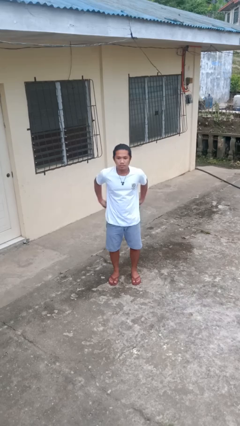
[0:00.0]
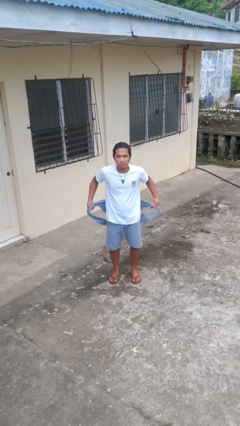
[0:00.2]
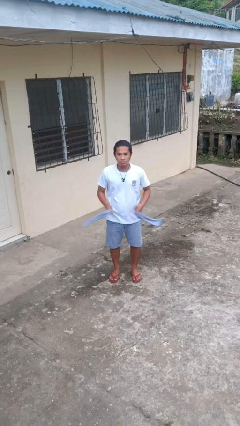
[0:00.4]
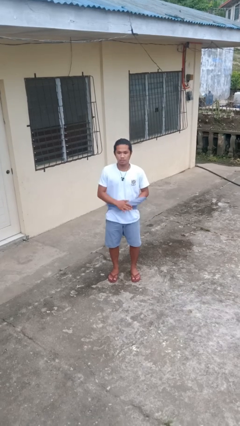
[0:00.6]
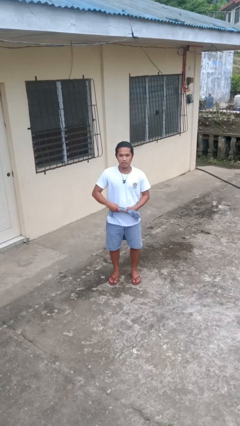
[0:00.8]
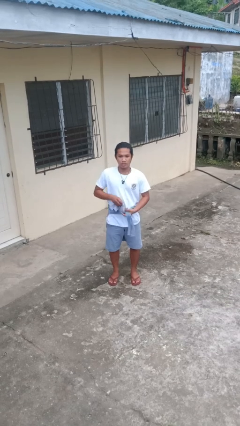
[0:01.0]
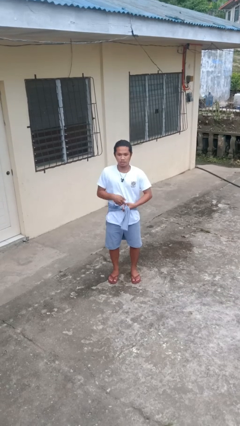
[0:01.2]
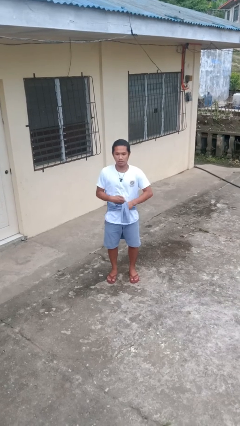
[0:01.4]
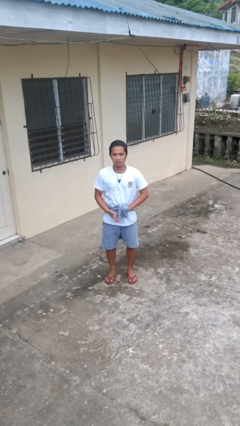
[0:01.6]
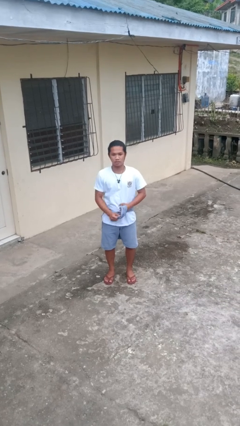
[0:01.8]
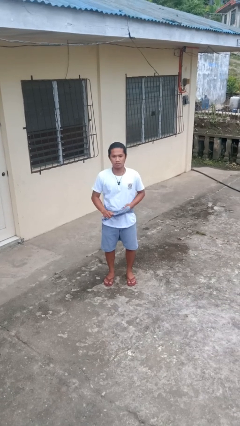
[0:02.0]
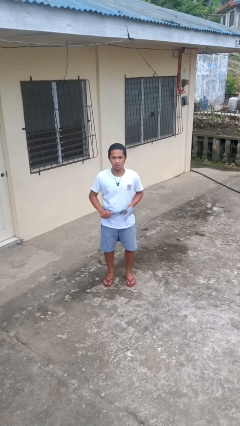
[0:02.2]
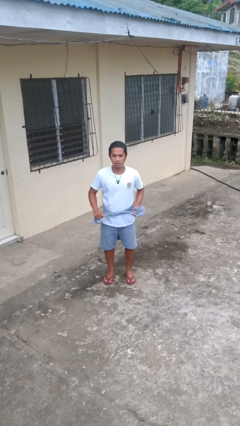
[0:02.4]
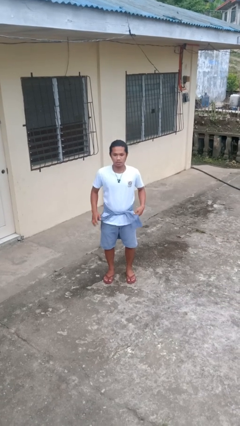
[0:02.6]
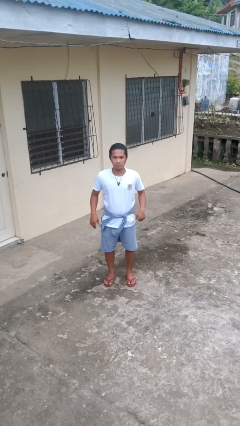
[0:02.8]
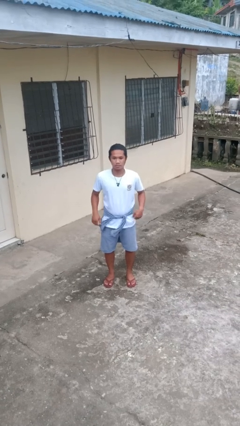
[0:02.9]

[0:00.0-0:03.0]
person ties jacket around waist

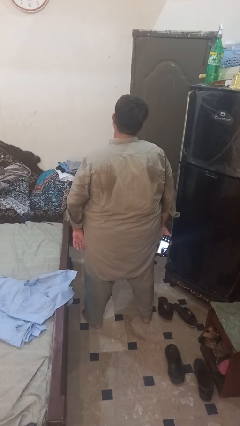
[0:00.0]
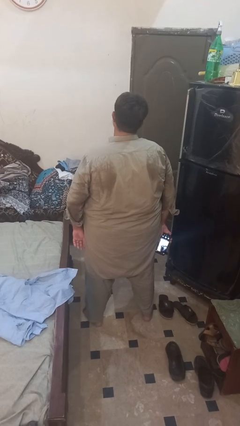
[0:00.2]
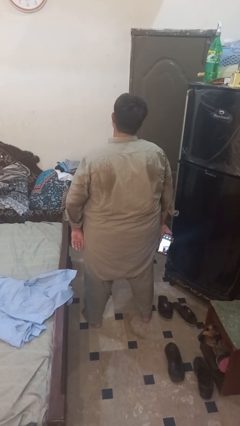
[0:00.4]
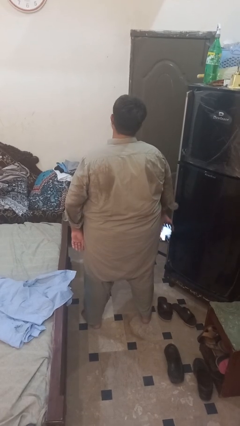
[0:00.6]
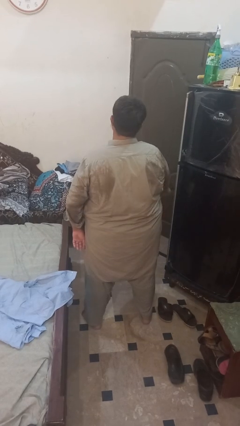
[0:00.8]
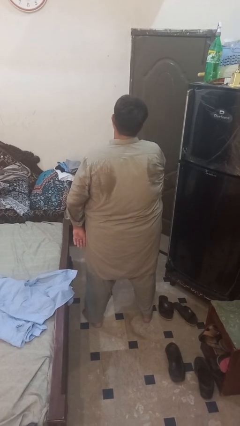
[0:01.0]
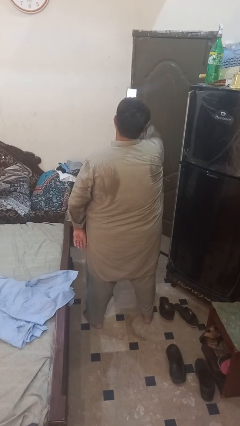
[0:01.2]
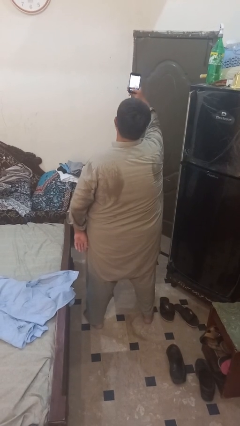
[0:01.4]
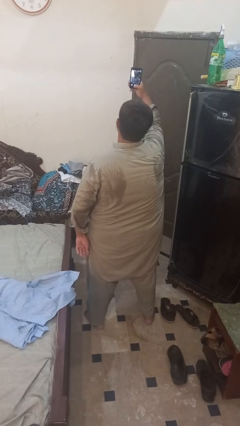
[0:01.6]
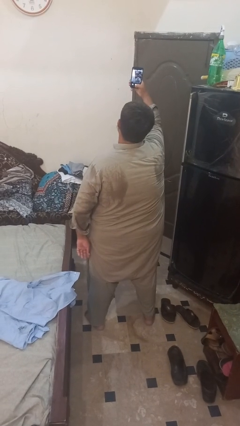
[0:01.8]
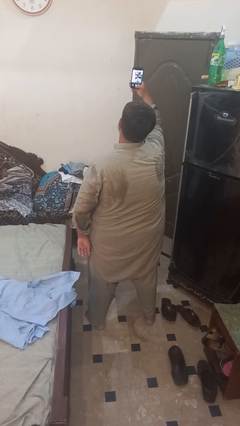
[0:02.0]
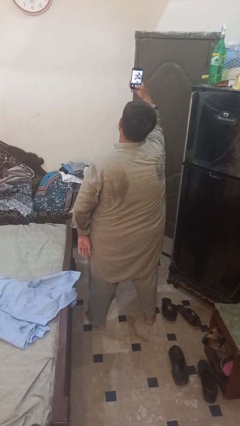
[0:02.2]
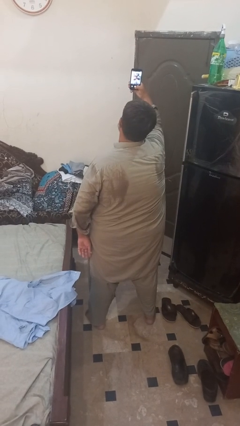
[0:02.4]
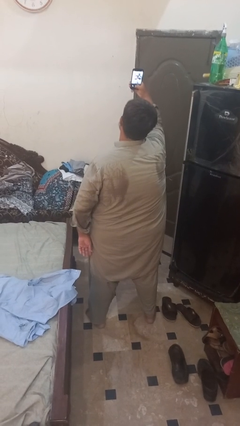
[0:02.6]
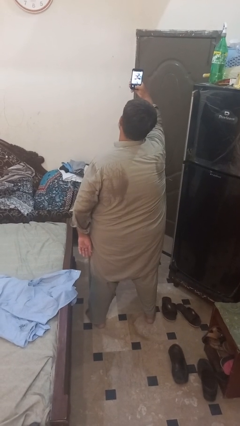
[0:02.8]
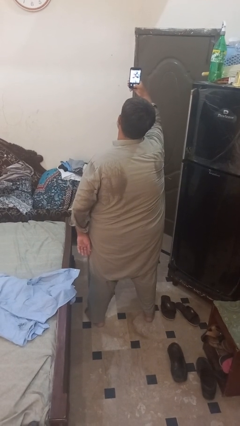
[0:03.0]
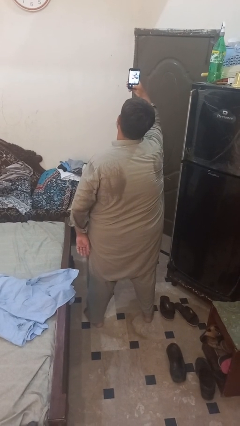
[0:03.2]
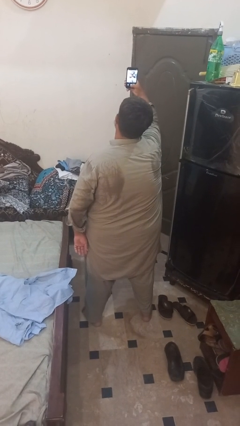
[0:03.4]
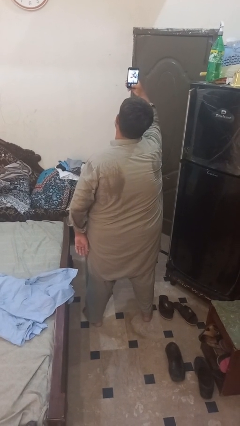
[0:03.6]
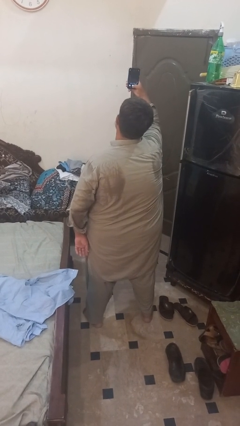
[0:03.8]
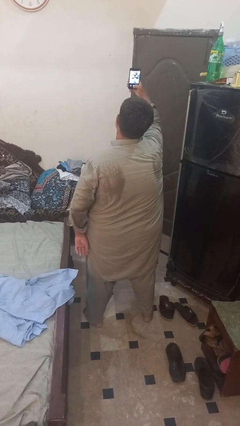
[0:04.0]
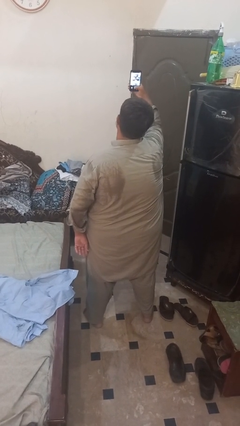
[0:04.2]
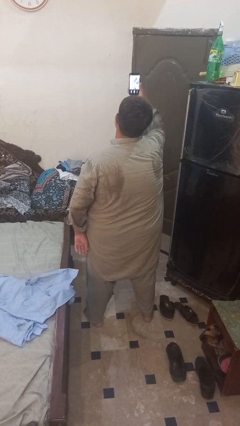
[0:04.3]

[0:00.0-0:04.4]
person takes selfie

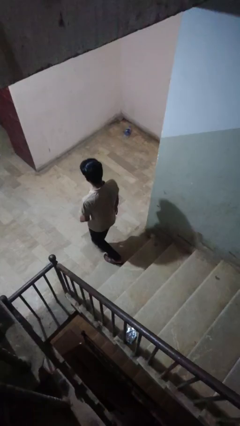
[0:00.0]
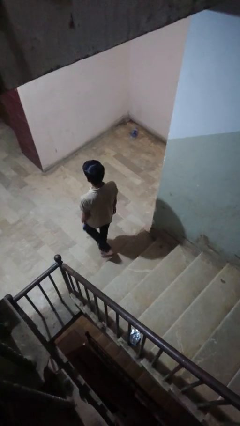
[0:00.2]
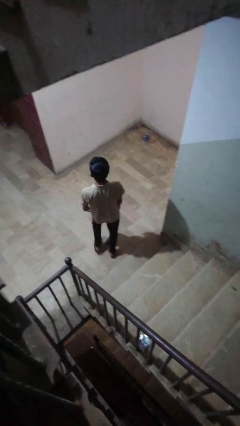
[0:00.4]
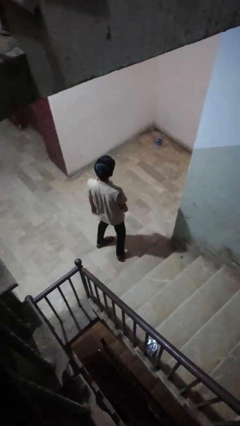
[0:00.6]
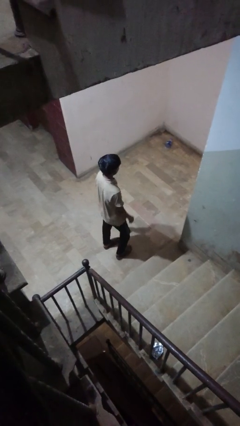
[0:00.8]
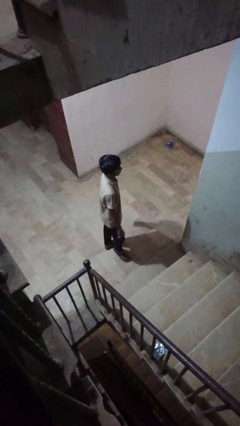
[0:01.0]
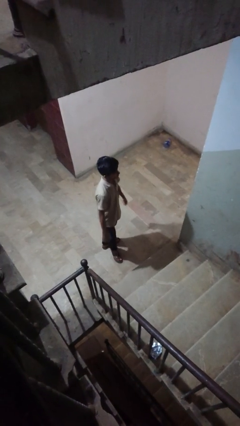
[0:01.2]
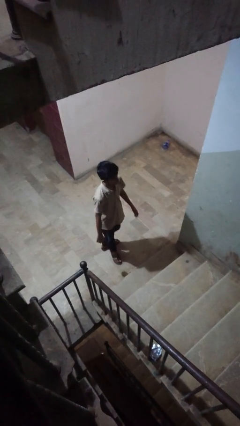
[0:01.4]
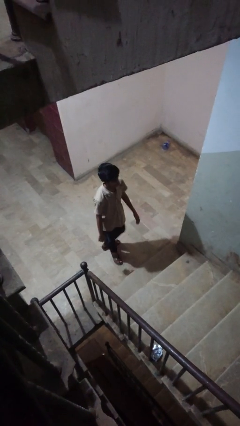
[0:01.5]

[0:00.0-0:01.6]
person climbs down stairs

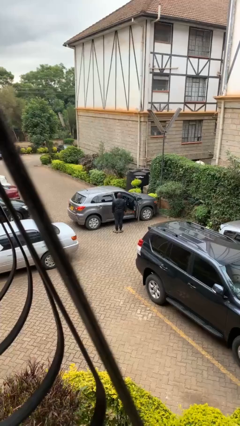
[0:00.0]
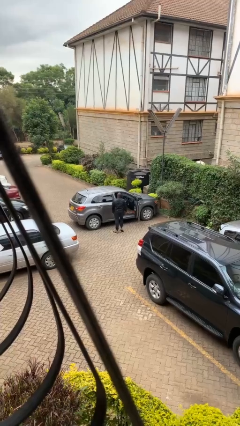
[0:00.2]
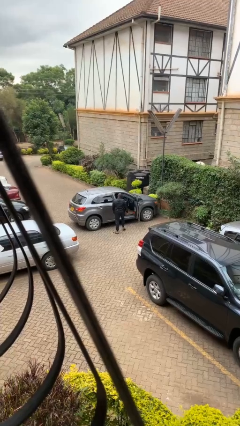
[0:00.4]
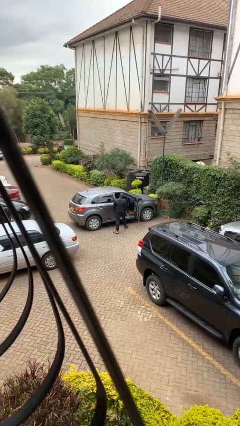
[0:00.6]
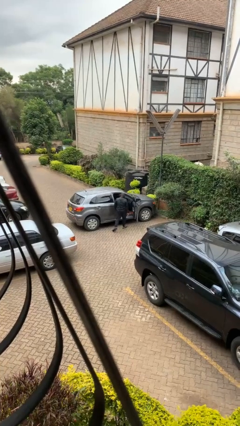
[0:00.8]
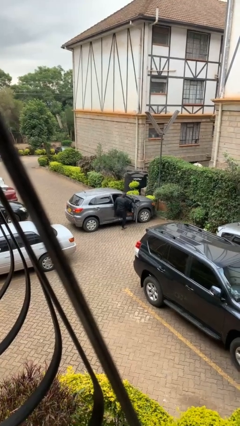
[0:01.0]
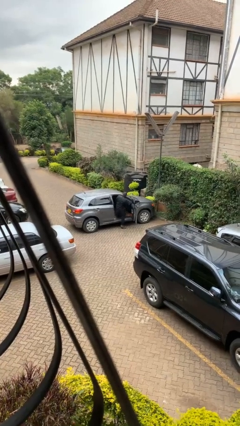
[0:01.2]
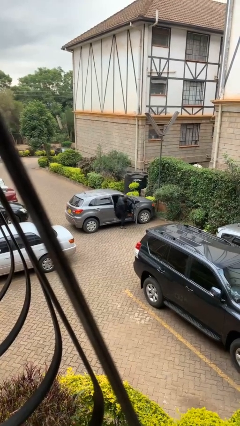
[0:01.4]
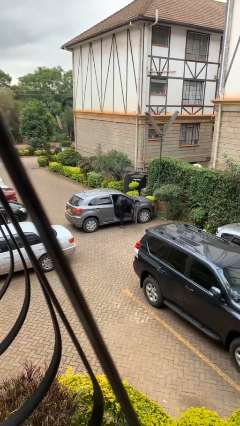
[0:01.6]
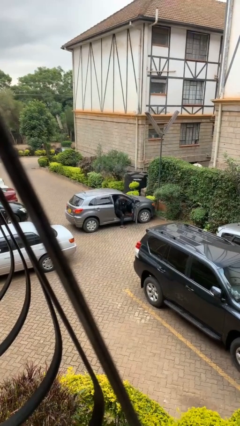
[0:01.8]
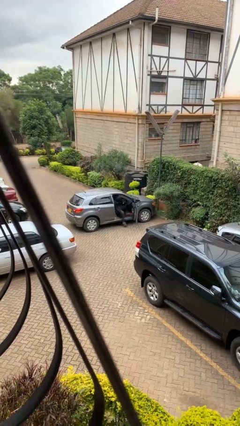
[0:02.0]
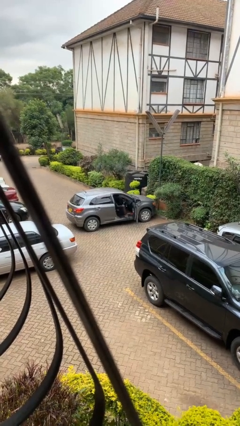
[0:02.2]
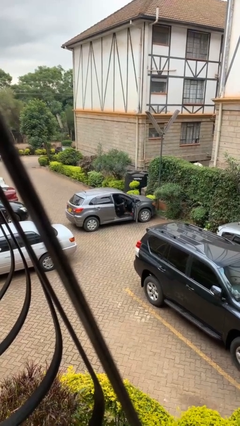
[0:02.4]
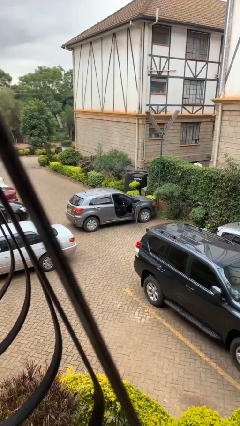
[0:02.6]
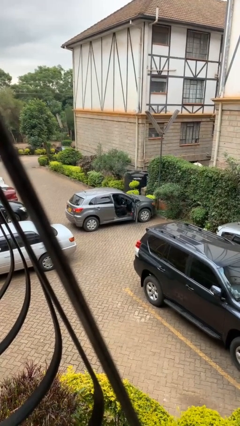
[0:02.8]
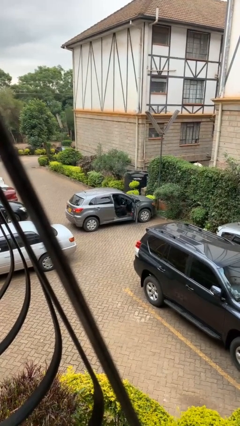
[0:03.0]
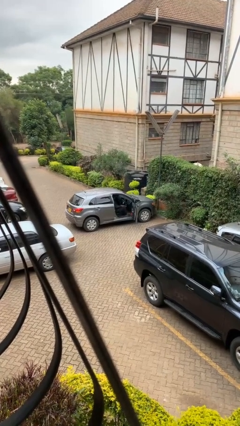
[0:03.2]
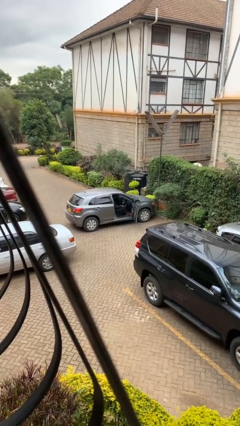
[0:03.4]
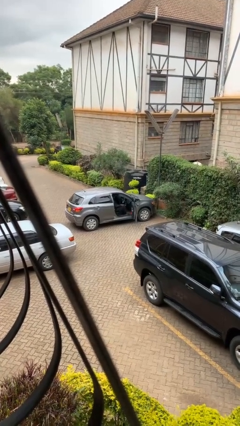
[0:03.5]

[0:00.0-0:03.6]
person enters car

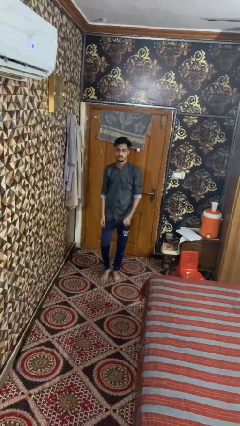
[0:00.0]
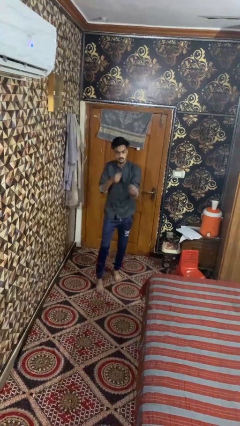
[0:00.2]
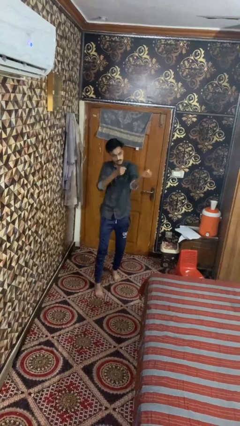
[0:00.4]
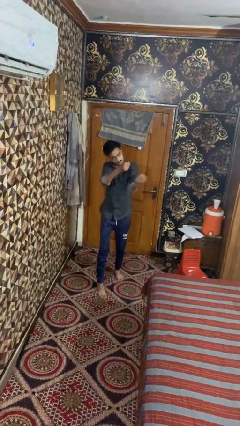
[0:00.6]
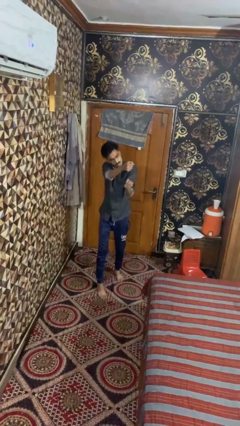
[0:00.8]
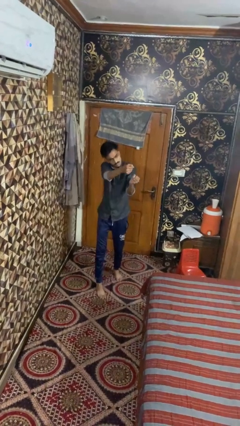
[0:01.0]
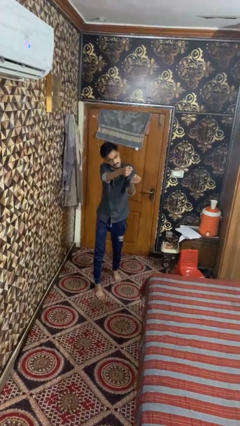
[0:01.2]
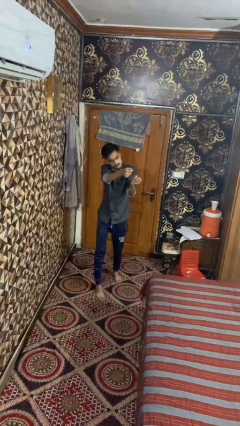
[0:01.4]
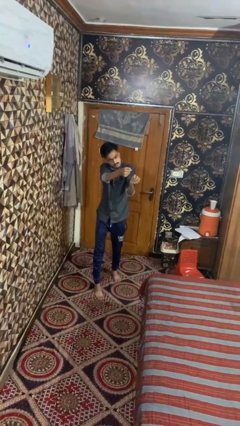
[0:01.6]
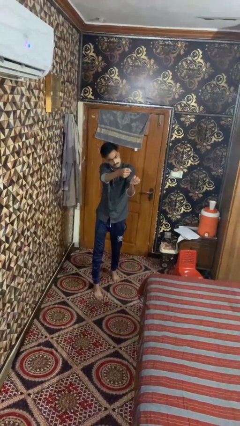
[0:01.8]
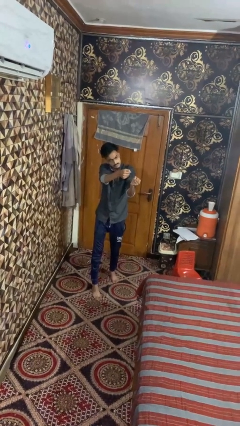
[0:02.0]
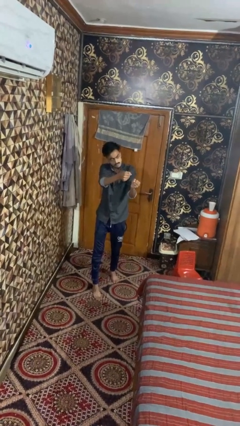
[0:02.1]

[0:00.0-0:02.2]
person punches

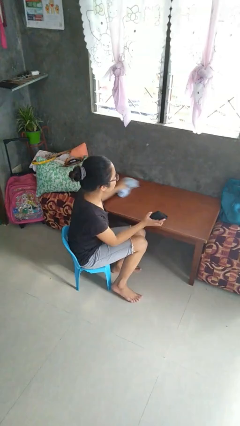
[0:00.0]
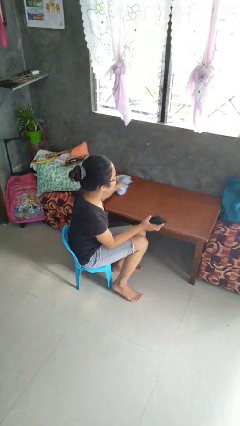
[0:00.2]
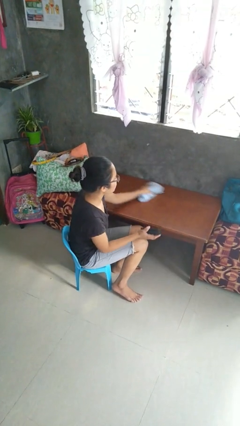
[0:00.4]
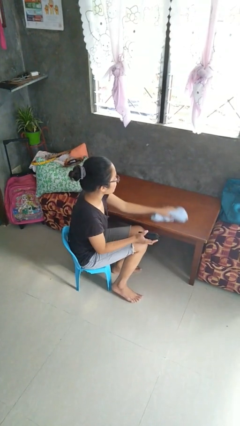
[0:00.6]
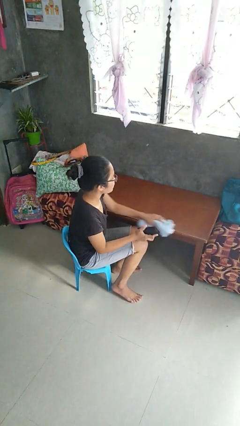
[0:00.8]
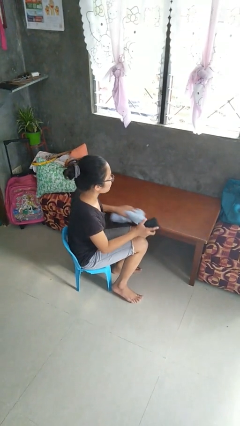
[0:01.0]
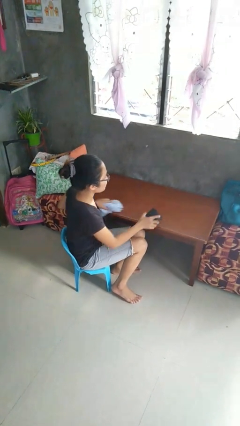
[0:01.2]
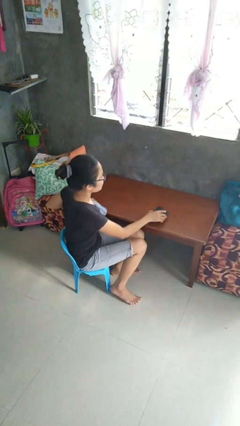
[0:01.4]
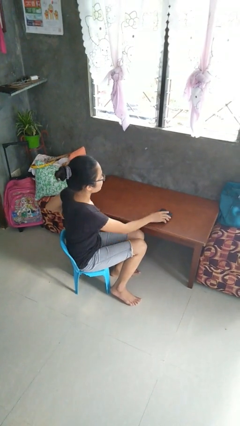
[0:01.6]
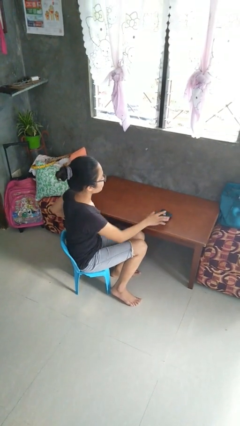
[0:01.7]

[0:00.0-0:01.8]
person cleans table with rag

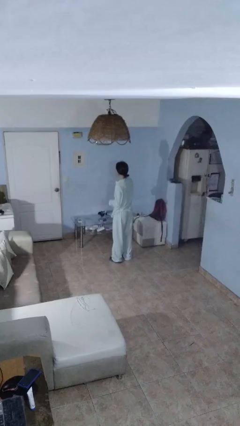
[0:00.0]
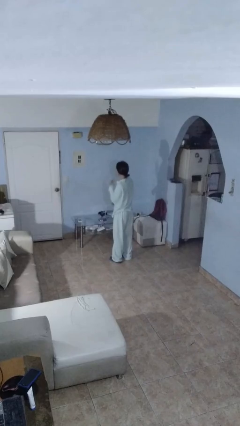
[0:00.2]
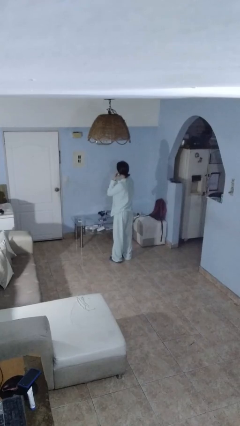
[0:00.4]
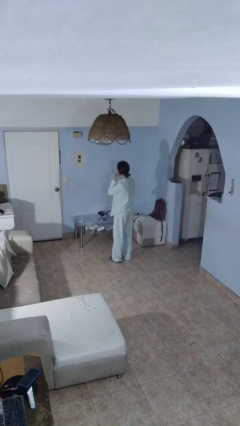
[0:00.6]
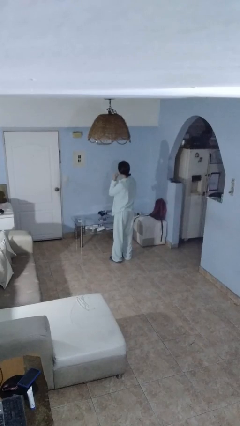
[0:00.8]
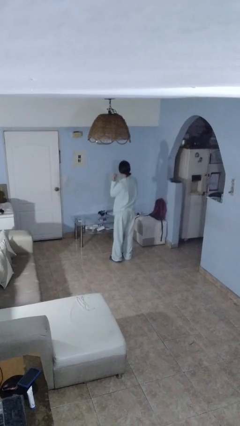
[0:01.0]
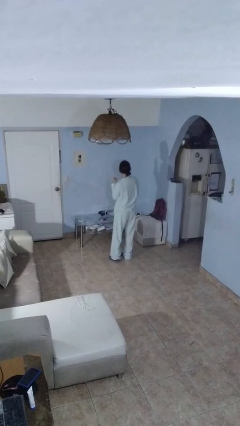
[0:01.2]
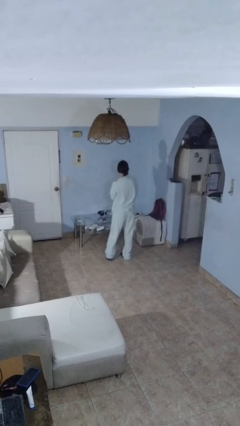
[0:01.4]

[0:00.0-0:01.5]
person takes off earrings
